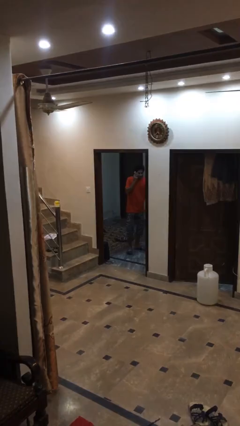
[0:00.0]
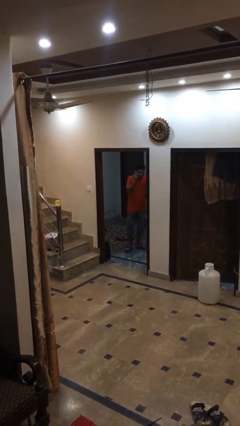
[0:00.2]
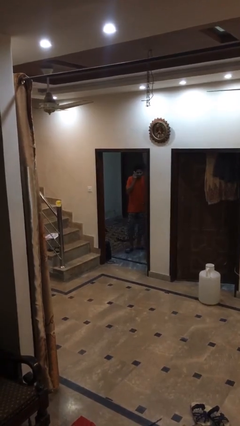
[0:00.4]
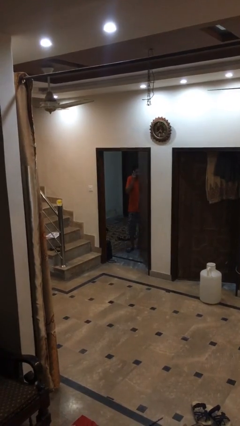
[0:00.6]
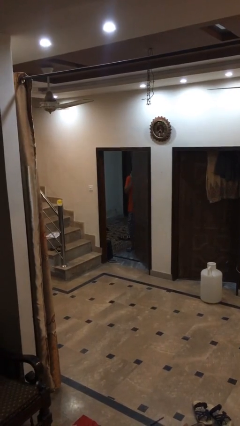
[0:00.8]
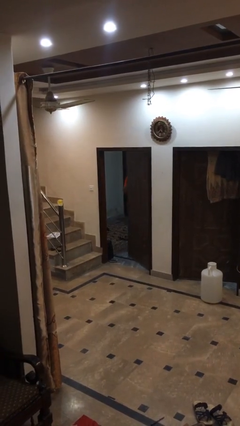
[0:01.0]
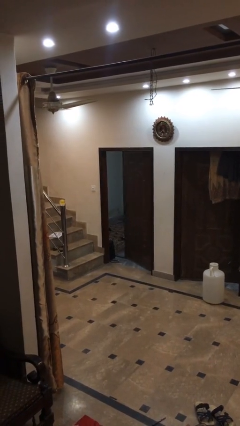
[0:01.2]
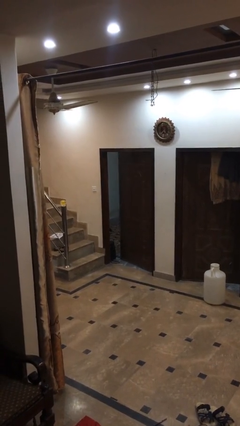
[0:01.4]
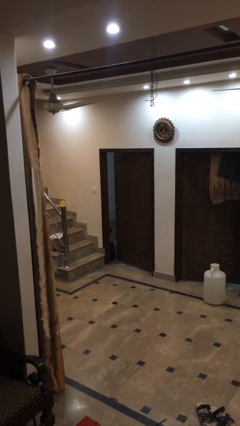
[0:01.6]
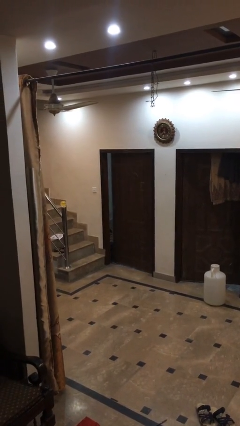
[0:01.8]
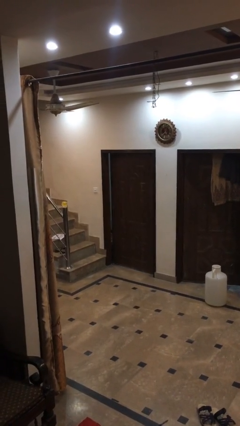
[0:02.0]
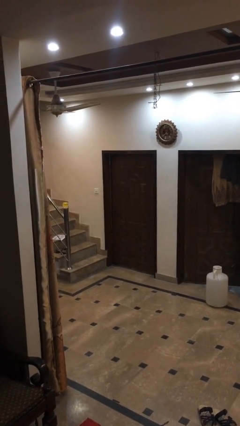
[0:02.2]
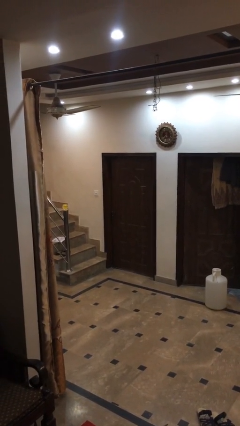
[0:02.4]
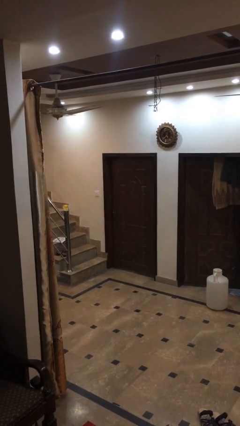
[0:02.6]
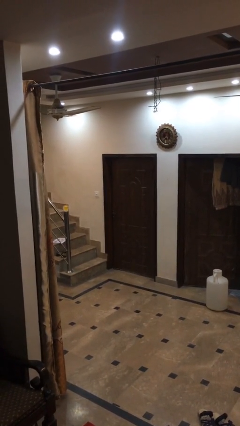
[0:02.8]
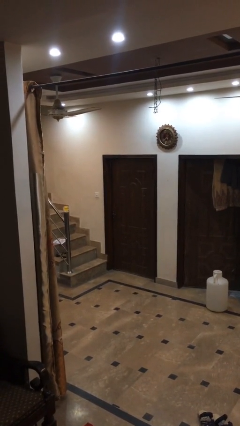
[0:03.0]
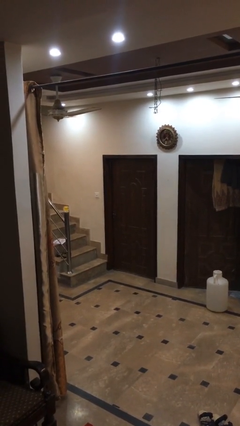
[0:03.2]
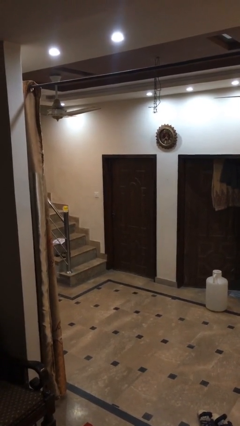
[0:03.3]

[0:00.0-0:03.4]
person closes facility door

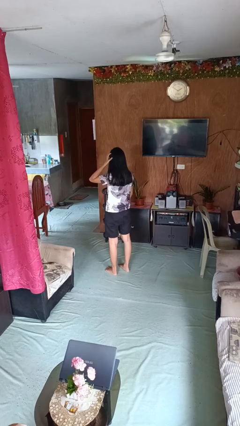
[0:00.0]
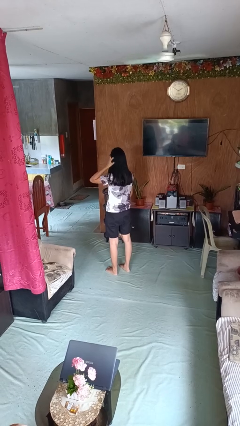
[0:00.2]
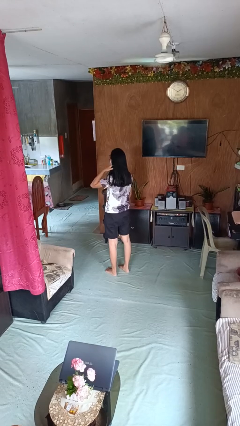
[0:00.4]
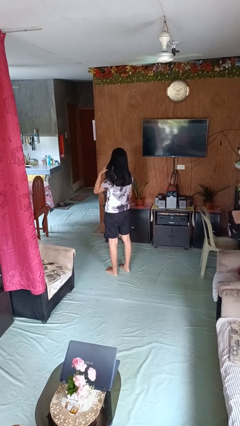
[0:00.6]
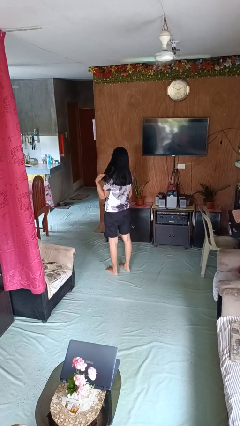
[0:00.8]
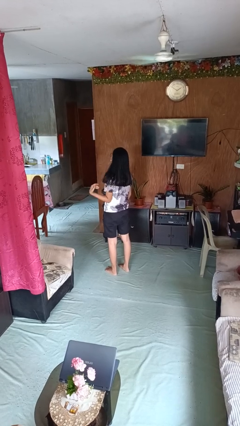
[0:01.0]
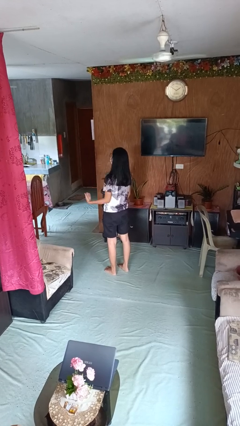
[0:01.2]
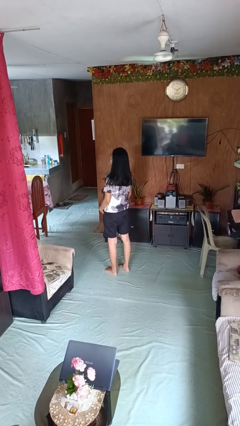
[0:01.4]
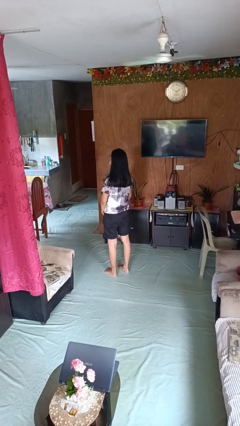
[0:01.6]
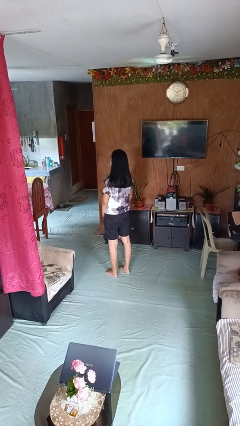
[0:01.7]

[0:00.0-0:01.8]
person strokes hair

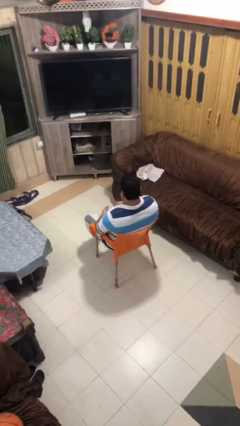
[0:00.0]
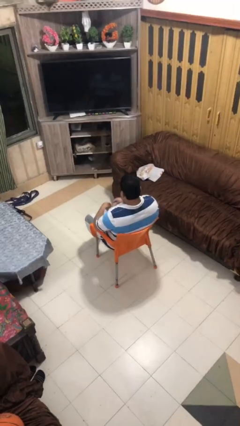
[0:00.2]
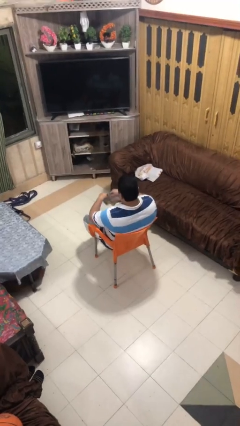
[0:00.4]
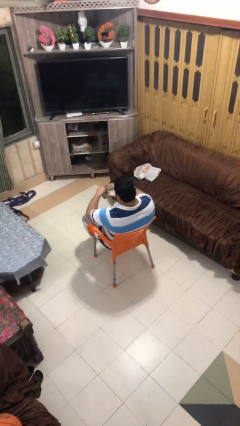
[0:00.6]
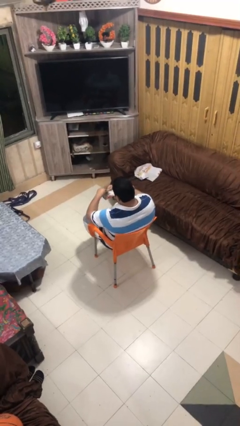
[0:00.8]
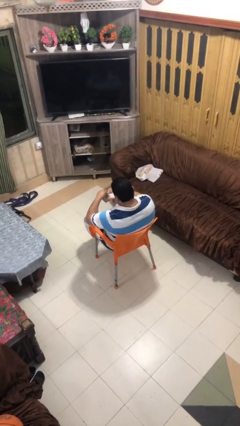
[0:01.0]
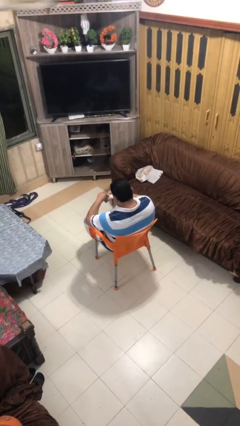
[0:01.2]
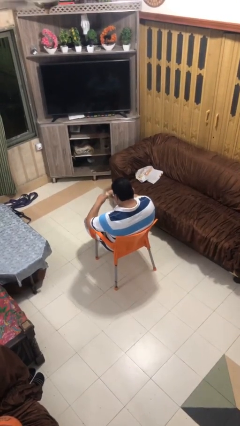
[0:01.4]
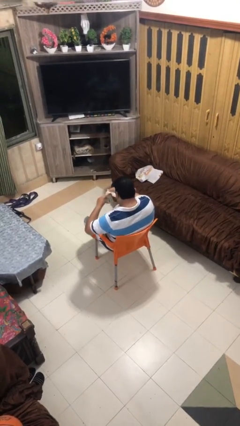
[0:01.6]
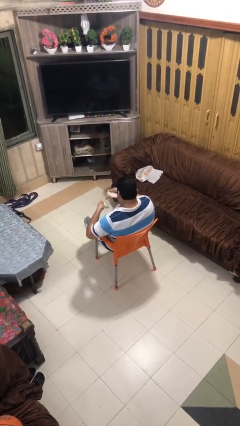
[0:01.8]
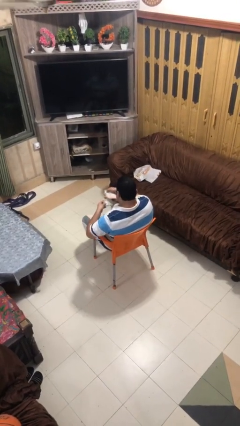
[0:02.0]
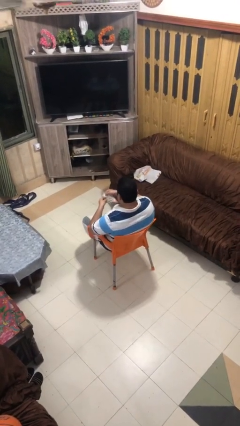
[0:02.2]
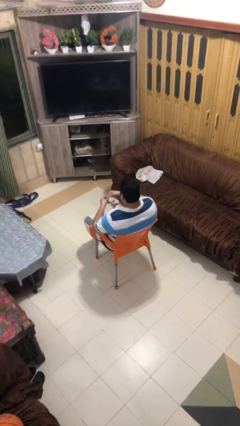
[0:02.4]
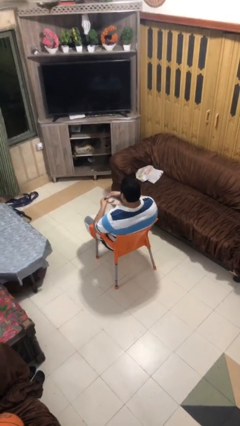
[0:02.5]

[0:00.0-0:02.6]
person tears paper

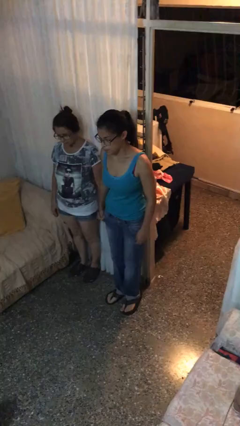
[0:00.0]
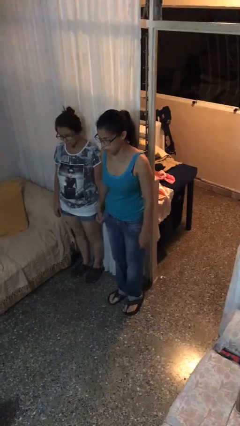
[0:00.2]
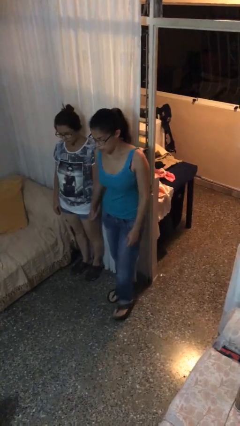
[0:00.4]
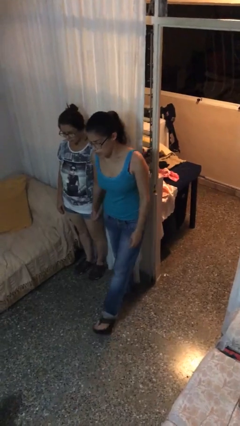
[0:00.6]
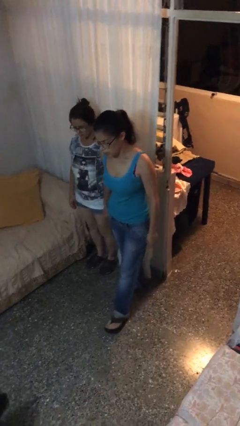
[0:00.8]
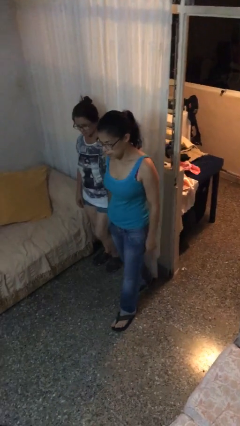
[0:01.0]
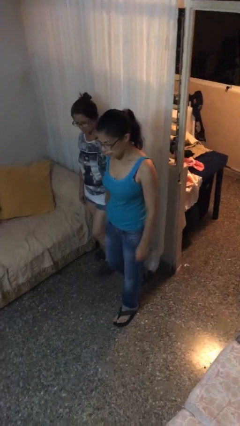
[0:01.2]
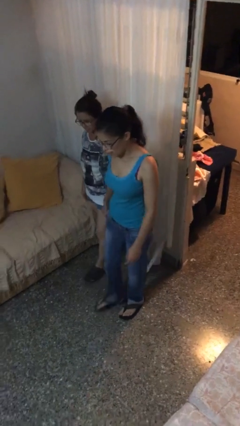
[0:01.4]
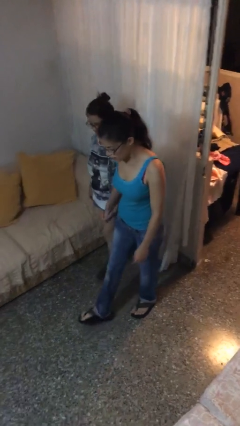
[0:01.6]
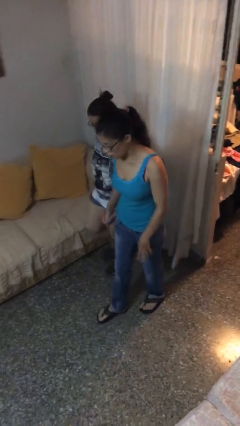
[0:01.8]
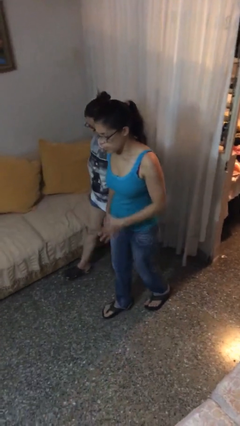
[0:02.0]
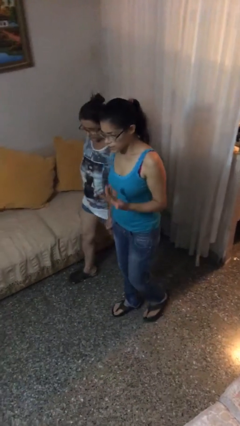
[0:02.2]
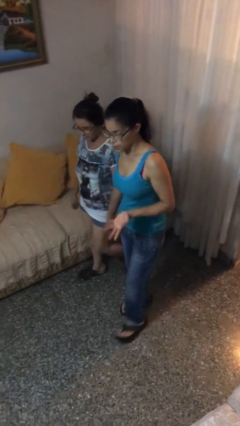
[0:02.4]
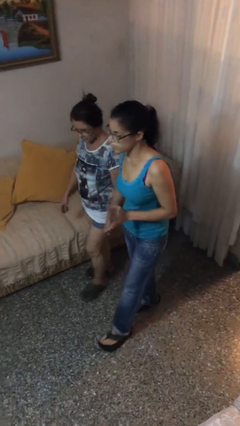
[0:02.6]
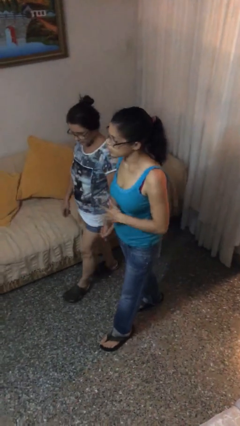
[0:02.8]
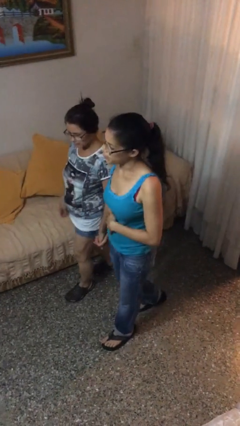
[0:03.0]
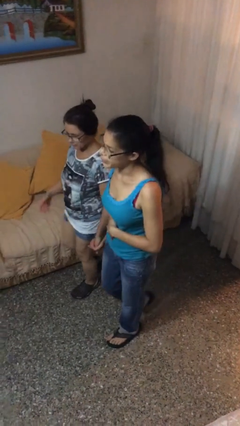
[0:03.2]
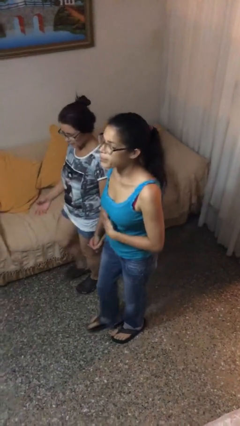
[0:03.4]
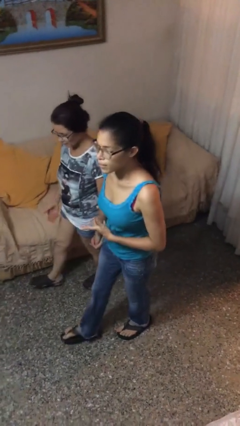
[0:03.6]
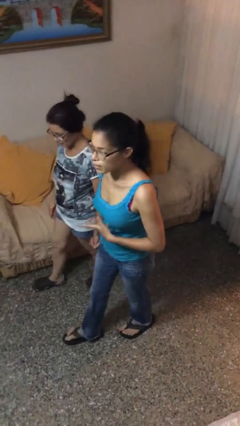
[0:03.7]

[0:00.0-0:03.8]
person holds hand

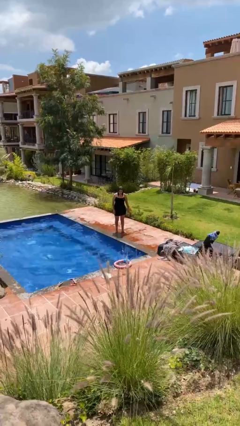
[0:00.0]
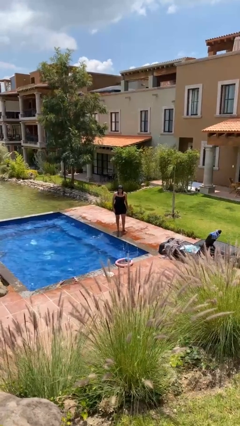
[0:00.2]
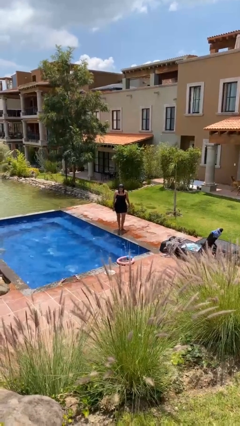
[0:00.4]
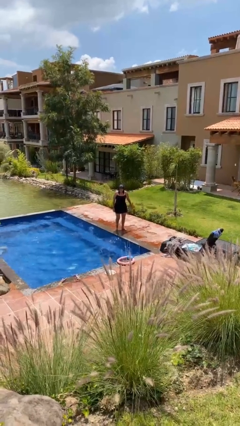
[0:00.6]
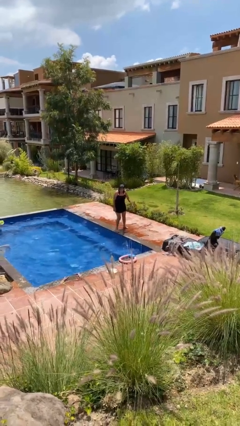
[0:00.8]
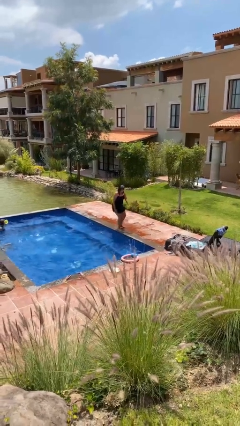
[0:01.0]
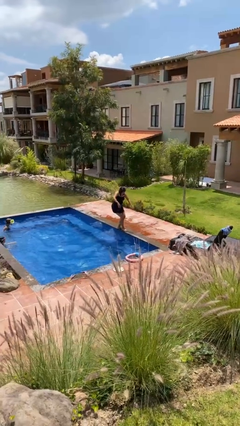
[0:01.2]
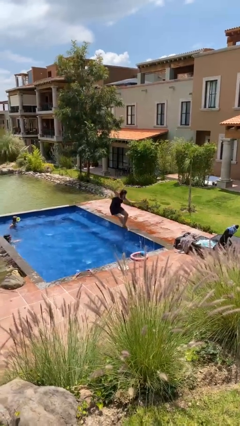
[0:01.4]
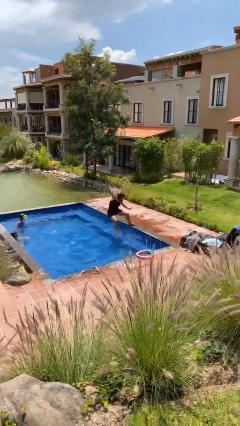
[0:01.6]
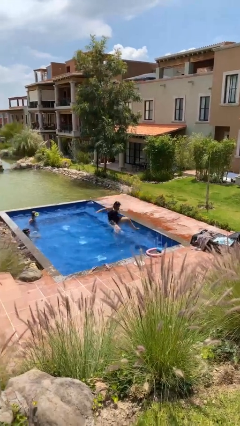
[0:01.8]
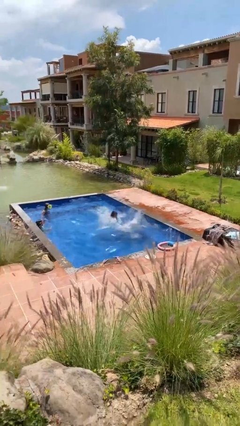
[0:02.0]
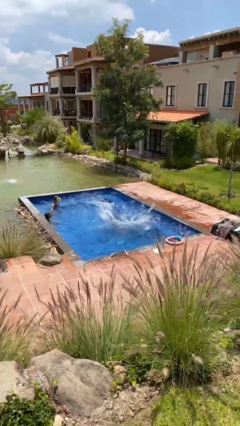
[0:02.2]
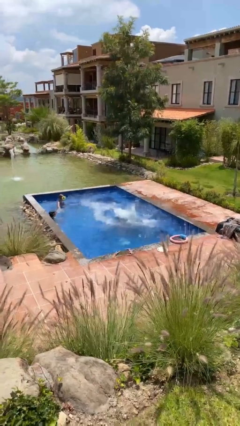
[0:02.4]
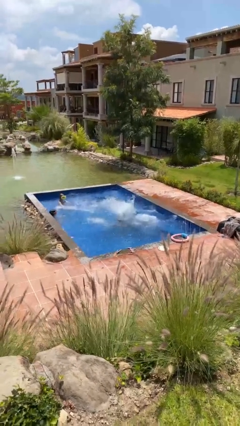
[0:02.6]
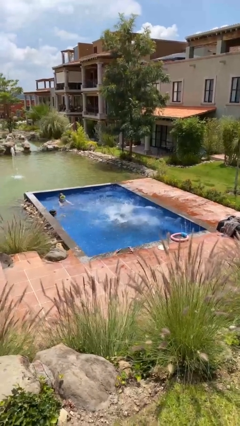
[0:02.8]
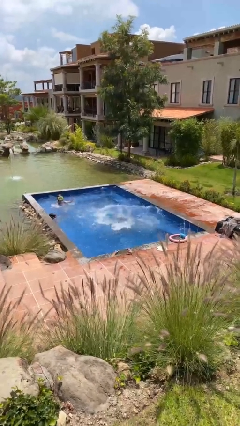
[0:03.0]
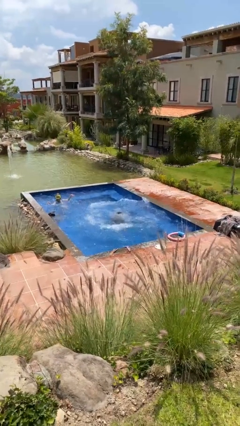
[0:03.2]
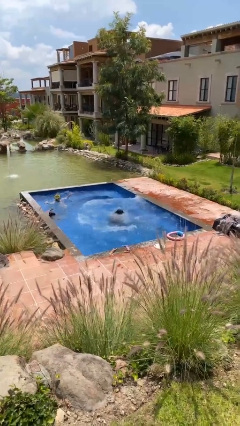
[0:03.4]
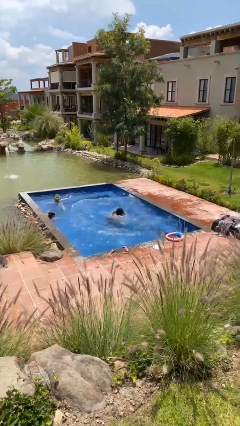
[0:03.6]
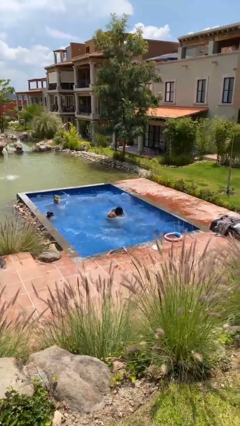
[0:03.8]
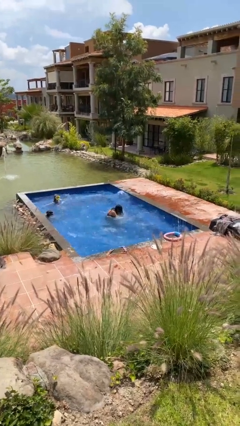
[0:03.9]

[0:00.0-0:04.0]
person falls into pool

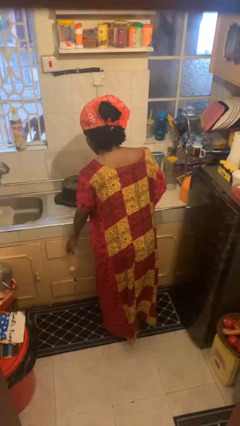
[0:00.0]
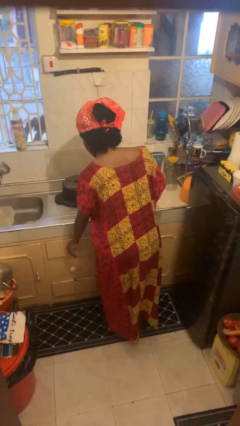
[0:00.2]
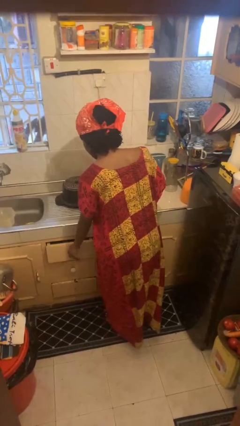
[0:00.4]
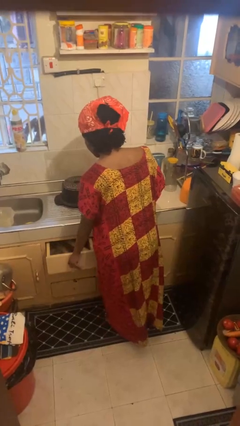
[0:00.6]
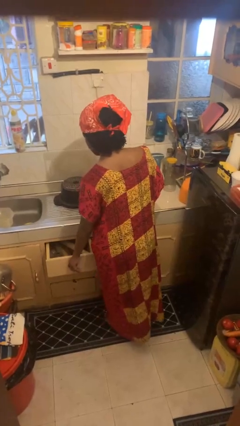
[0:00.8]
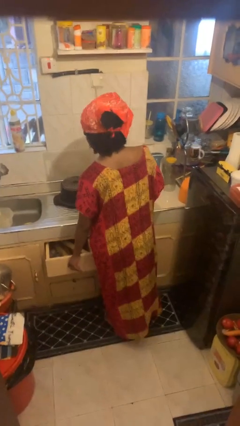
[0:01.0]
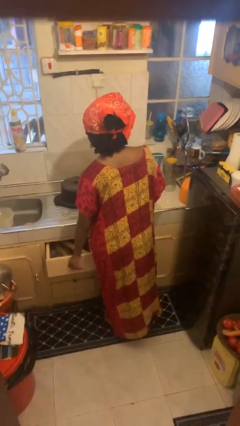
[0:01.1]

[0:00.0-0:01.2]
person opens kitchen drawer

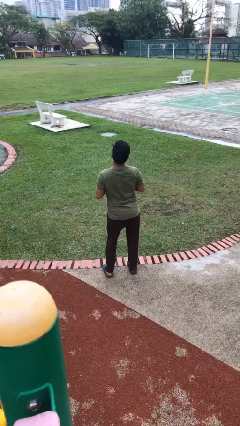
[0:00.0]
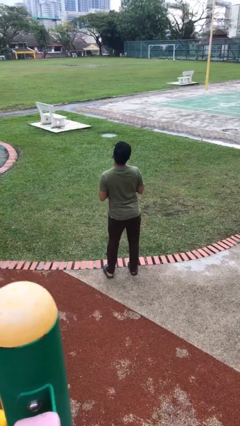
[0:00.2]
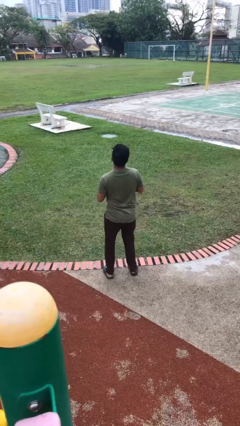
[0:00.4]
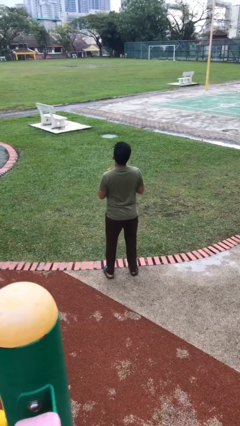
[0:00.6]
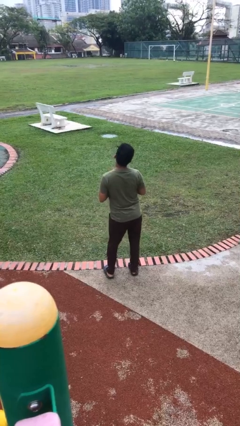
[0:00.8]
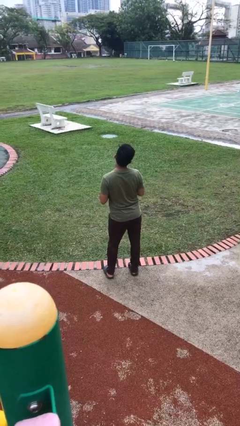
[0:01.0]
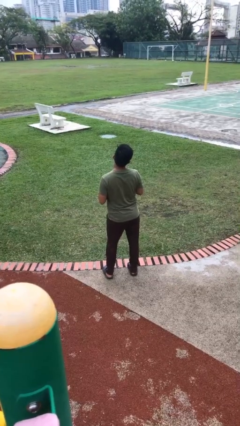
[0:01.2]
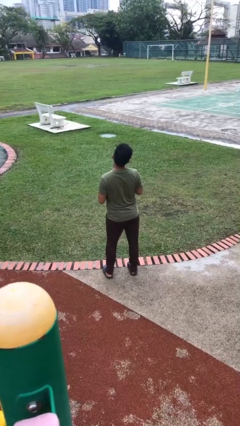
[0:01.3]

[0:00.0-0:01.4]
person wiggles hips
